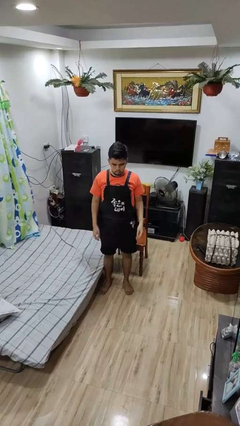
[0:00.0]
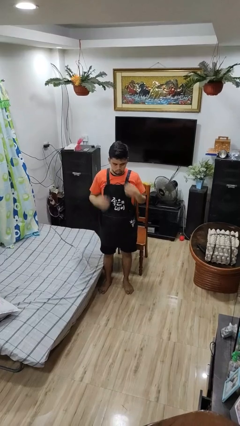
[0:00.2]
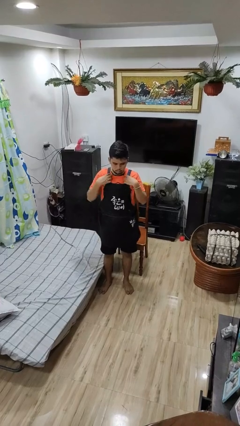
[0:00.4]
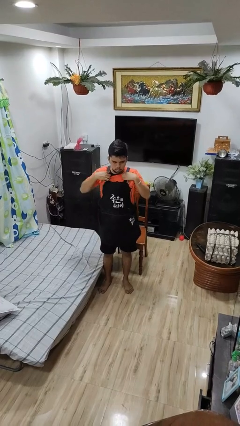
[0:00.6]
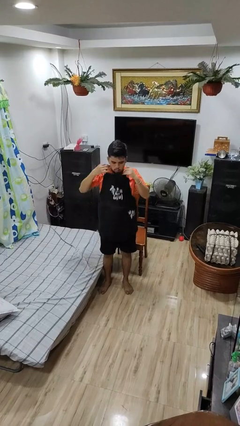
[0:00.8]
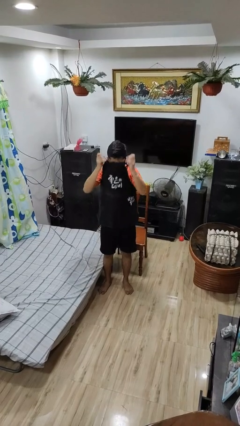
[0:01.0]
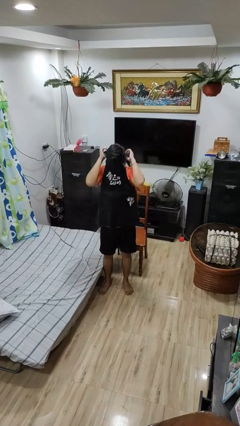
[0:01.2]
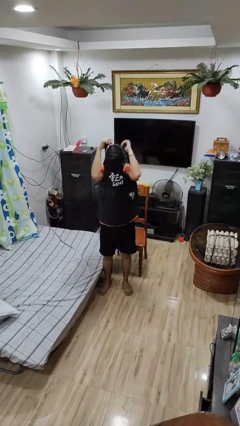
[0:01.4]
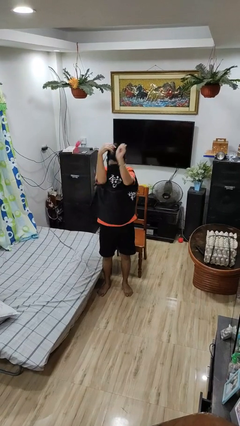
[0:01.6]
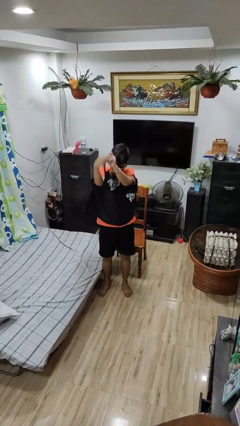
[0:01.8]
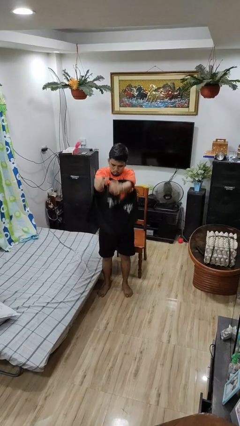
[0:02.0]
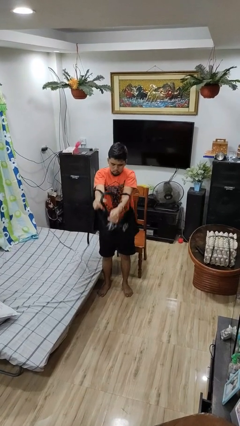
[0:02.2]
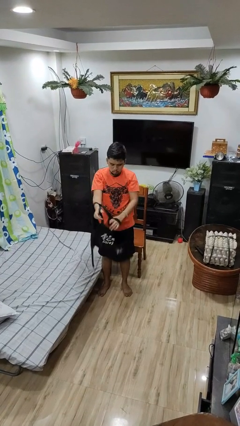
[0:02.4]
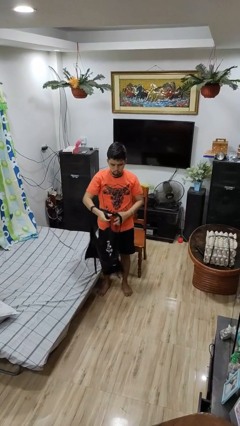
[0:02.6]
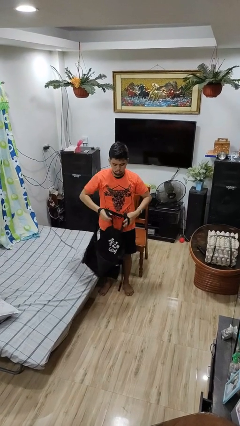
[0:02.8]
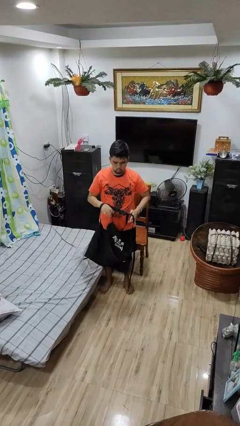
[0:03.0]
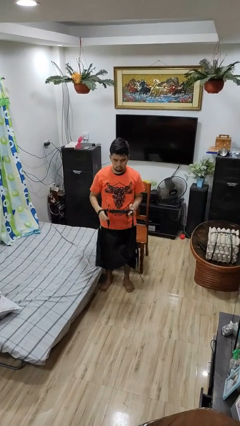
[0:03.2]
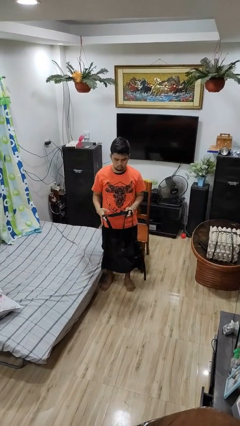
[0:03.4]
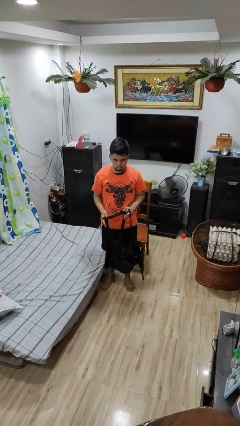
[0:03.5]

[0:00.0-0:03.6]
person takes off apron

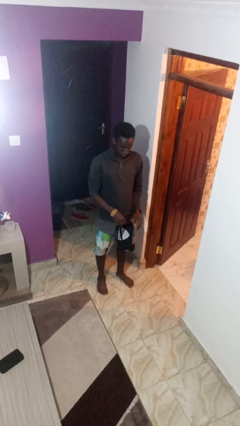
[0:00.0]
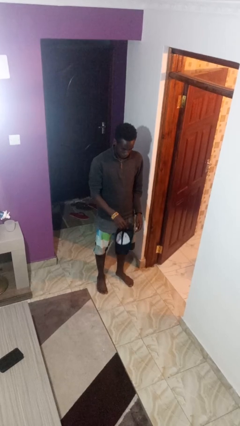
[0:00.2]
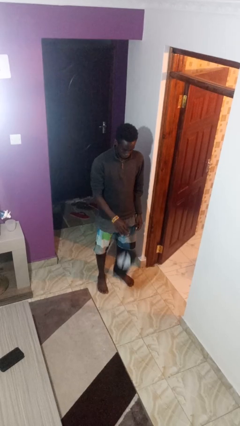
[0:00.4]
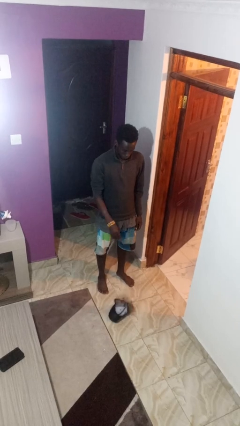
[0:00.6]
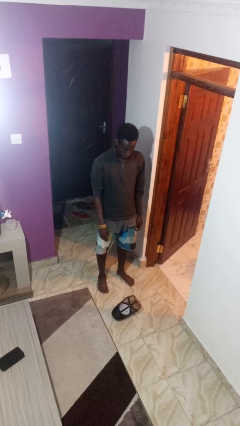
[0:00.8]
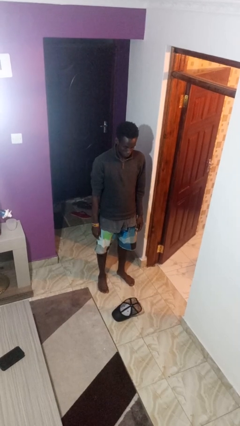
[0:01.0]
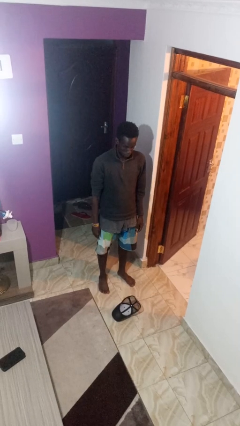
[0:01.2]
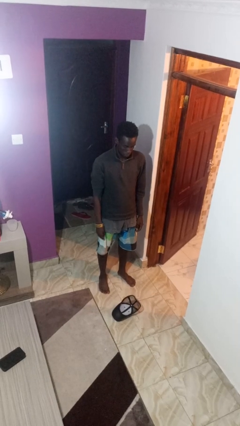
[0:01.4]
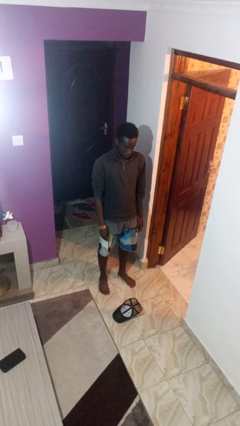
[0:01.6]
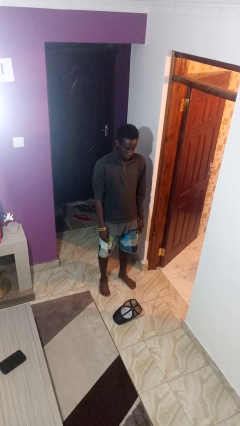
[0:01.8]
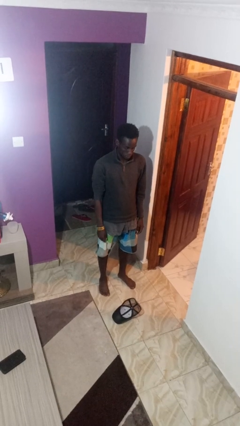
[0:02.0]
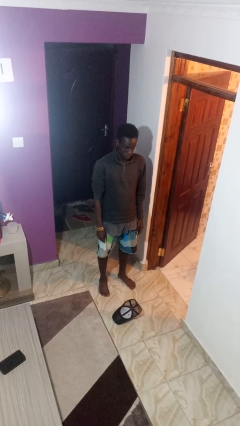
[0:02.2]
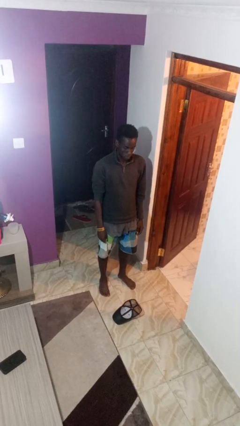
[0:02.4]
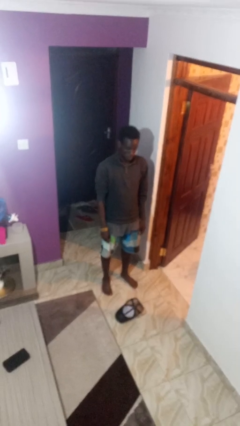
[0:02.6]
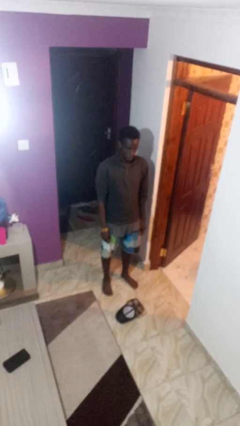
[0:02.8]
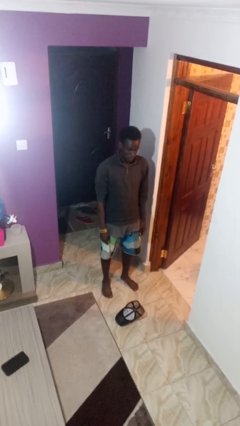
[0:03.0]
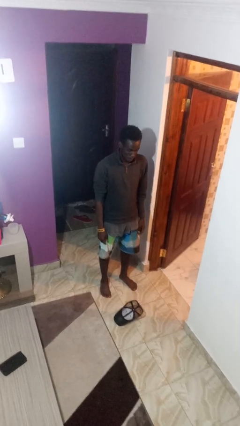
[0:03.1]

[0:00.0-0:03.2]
person drops object

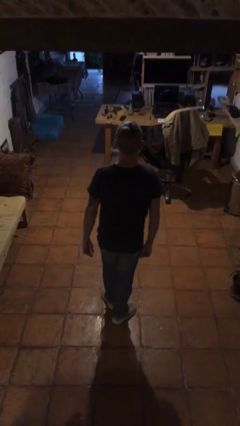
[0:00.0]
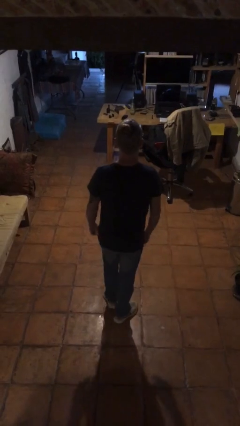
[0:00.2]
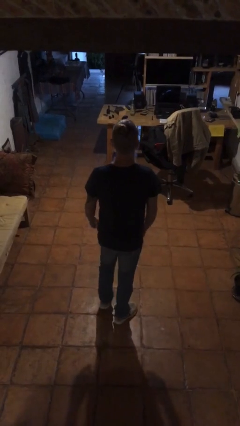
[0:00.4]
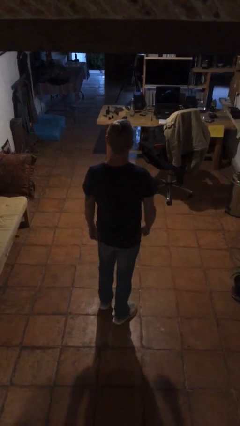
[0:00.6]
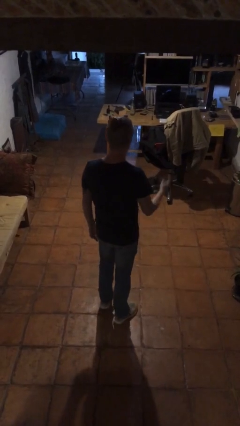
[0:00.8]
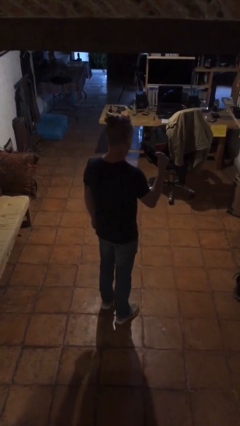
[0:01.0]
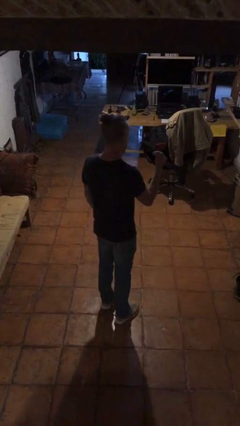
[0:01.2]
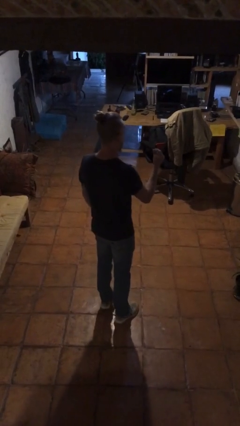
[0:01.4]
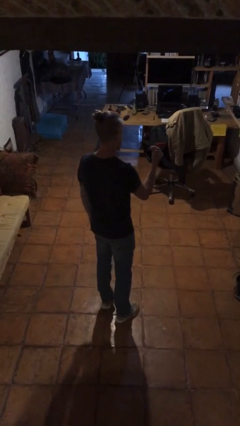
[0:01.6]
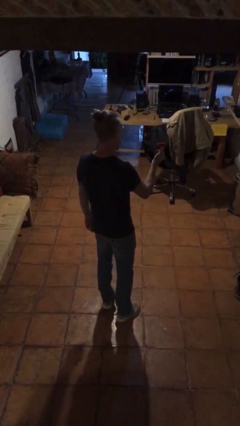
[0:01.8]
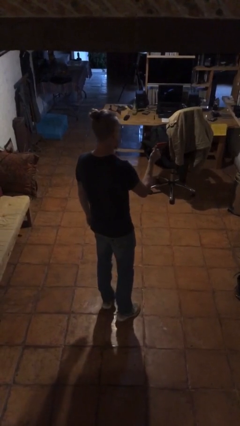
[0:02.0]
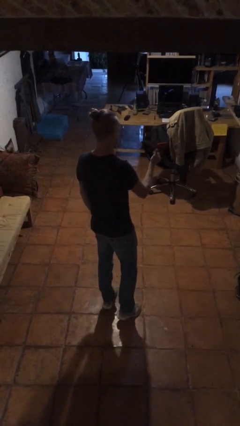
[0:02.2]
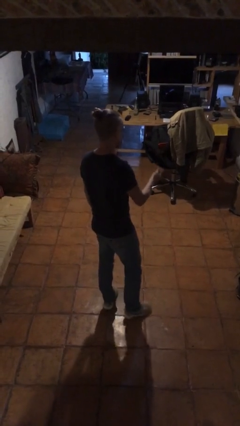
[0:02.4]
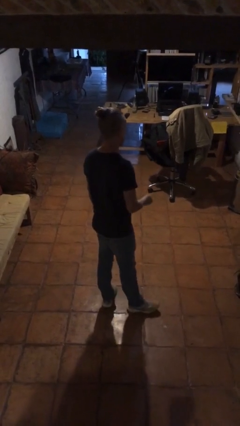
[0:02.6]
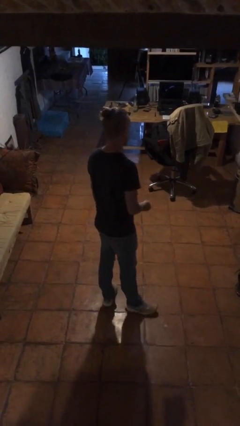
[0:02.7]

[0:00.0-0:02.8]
person snaps fingers

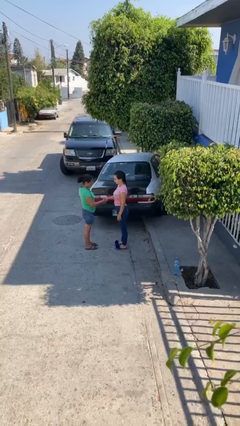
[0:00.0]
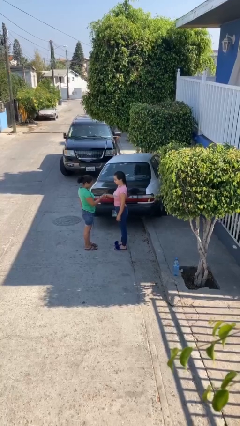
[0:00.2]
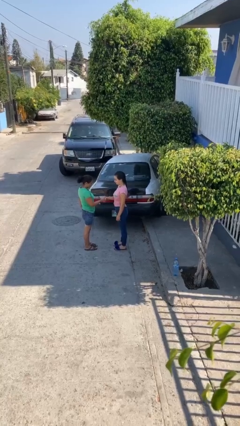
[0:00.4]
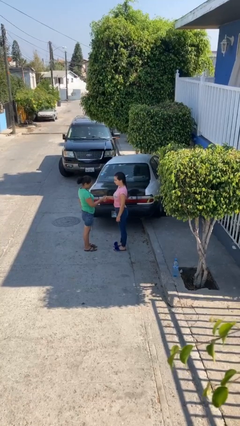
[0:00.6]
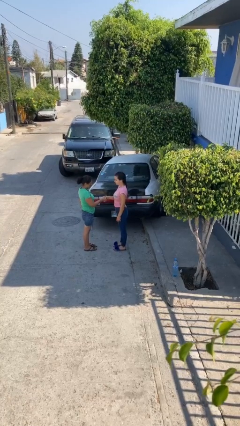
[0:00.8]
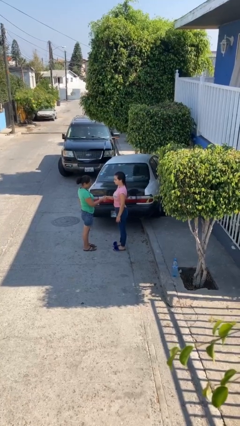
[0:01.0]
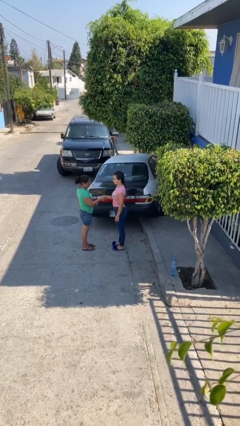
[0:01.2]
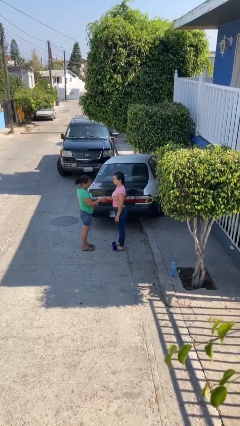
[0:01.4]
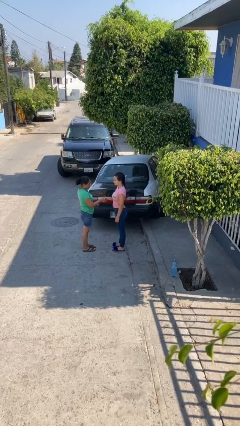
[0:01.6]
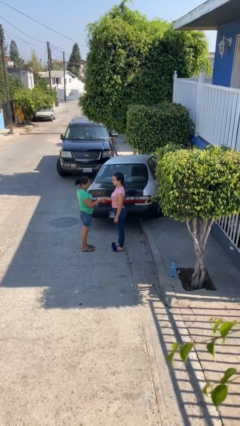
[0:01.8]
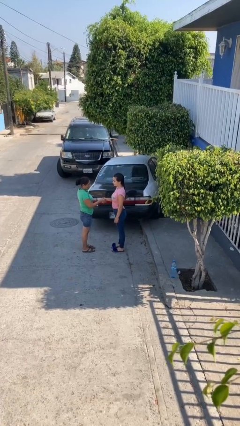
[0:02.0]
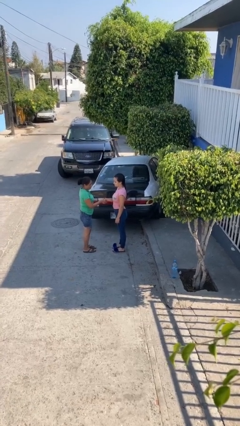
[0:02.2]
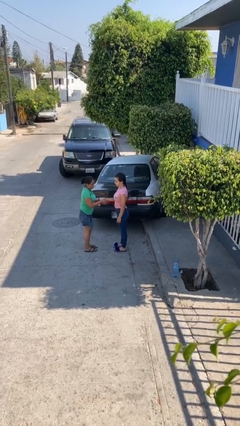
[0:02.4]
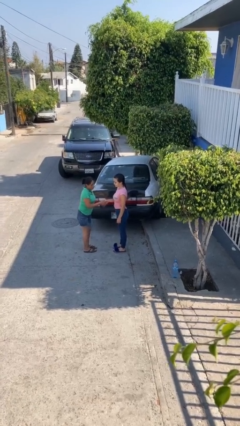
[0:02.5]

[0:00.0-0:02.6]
person shakes hand

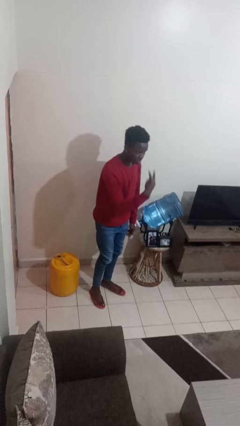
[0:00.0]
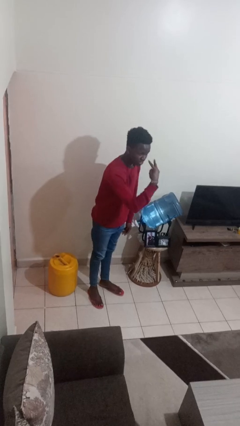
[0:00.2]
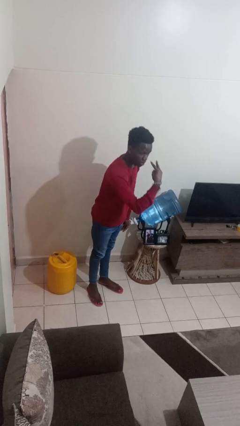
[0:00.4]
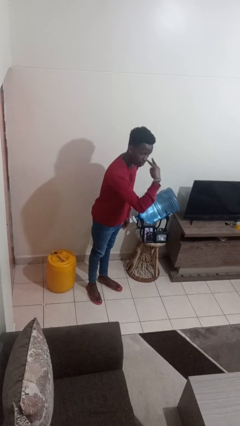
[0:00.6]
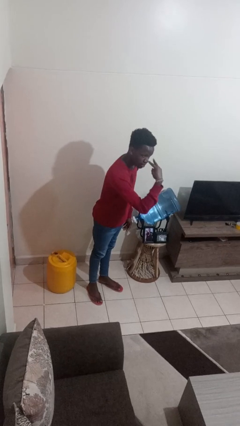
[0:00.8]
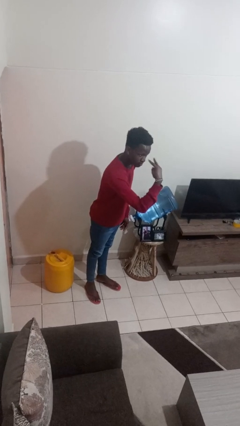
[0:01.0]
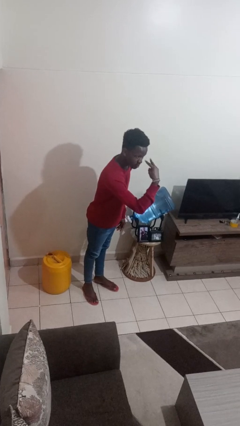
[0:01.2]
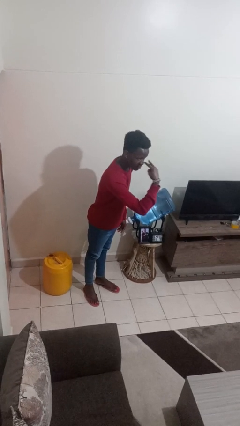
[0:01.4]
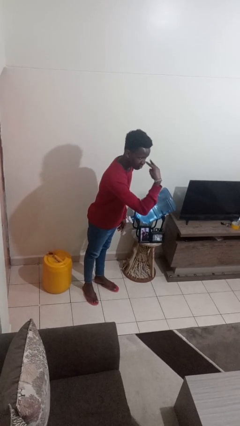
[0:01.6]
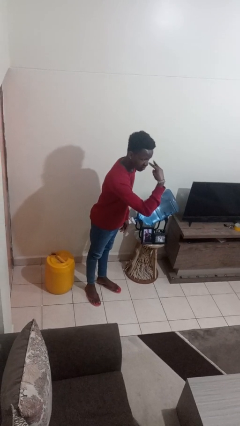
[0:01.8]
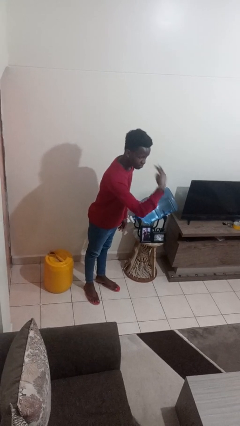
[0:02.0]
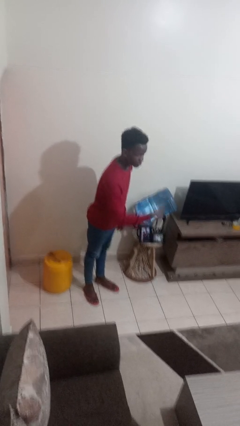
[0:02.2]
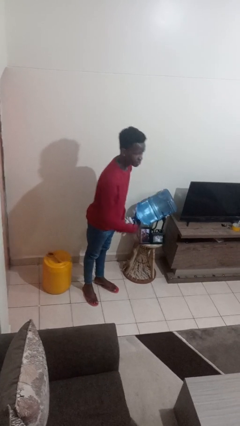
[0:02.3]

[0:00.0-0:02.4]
person gestures watch closely

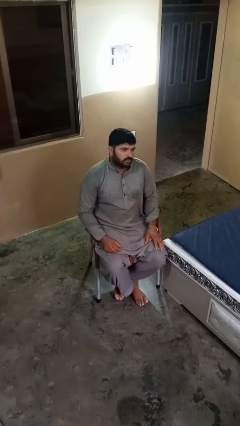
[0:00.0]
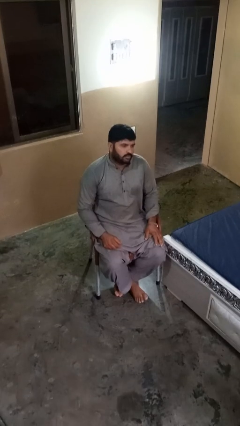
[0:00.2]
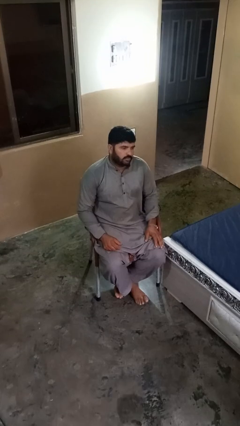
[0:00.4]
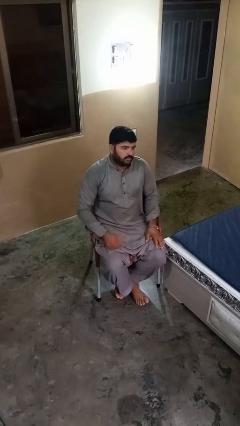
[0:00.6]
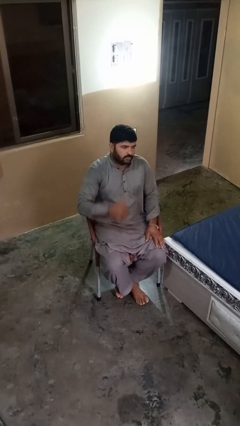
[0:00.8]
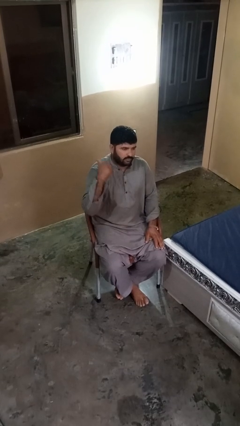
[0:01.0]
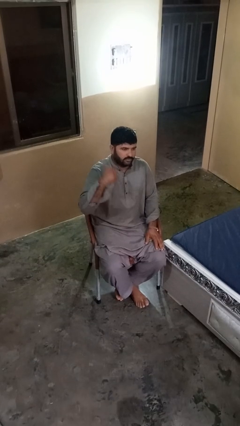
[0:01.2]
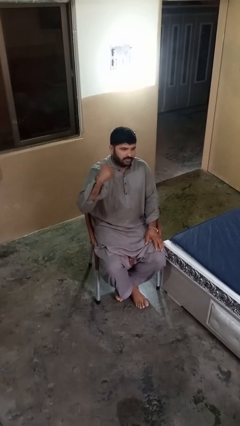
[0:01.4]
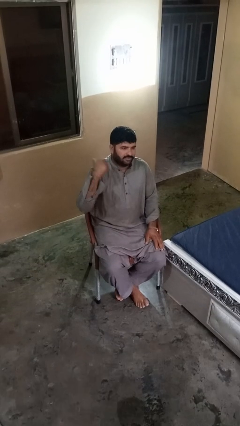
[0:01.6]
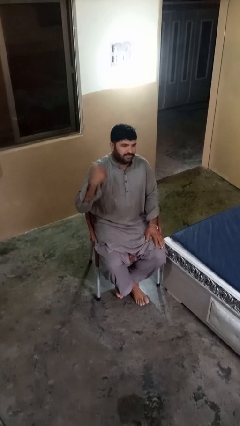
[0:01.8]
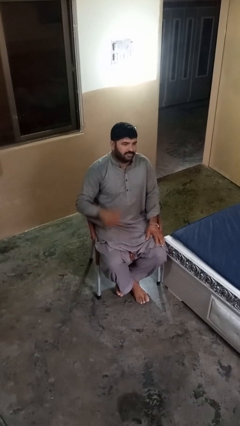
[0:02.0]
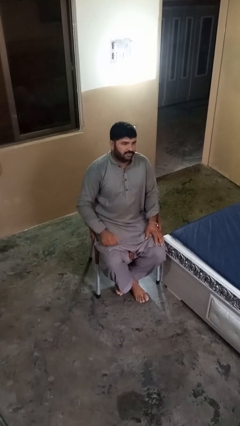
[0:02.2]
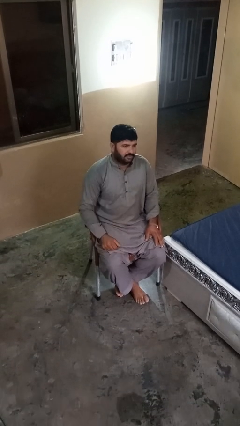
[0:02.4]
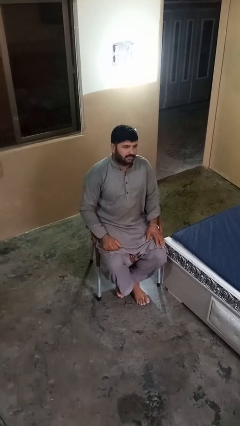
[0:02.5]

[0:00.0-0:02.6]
person gestures behind me
